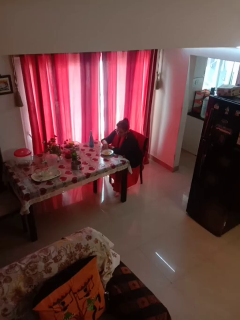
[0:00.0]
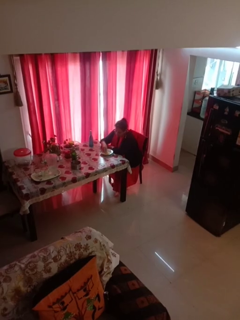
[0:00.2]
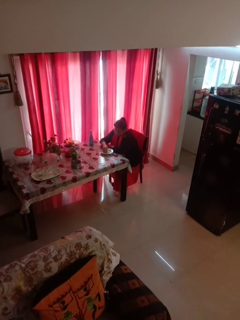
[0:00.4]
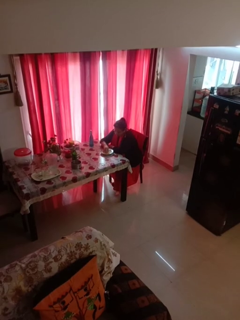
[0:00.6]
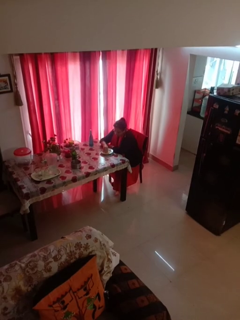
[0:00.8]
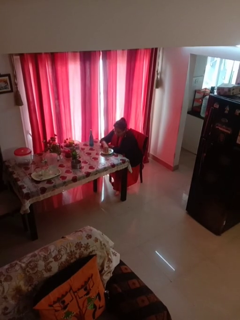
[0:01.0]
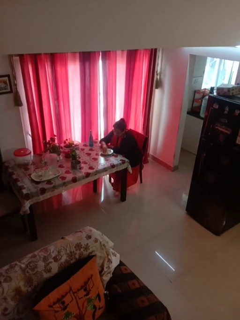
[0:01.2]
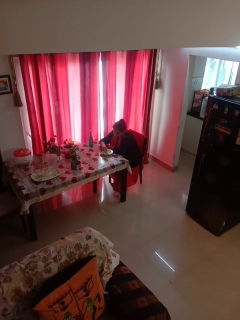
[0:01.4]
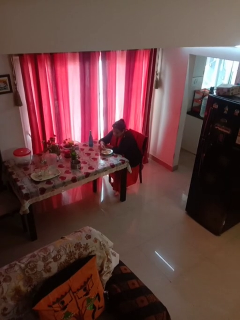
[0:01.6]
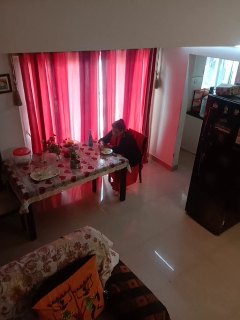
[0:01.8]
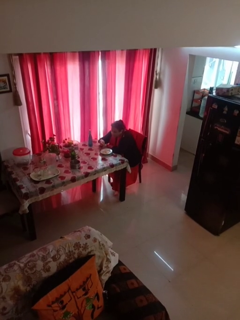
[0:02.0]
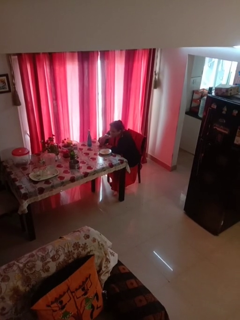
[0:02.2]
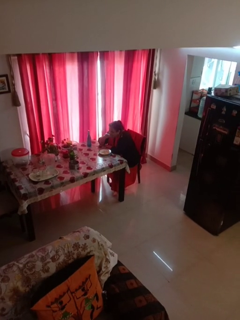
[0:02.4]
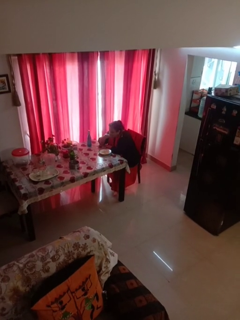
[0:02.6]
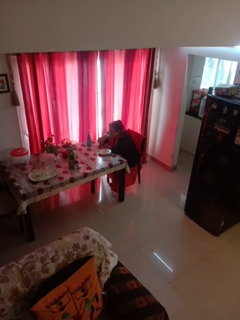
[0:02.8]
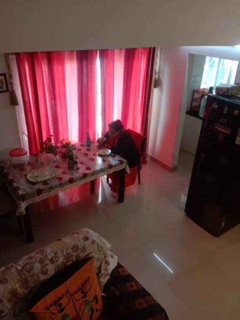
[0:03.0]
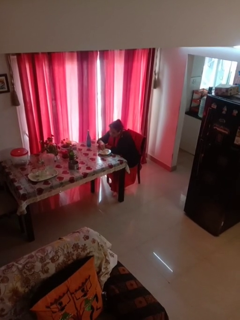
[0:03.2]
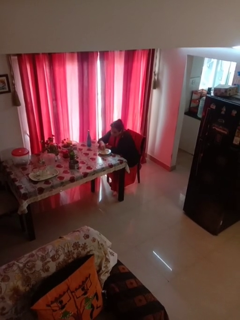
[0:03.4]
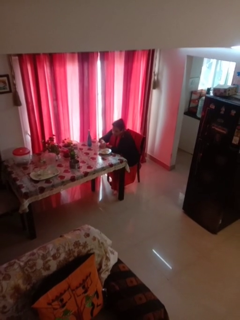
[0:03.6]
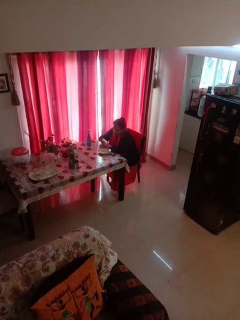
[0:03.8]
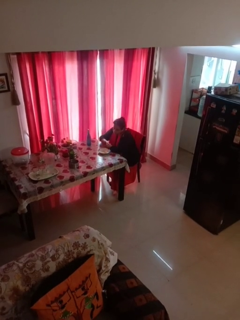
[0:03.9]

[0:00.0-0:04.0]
person eats with hands

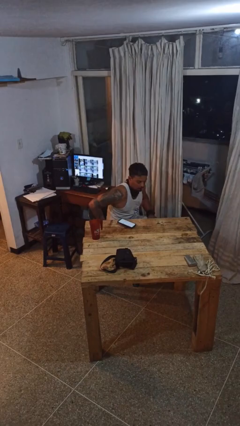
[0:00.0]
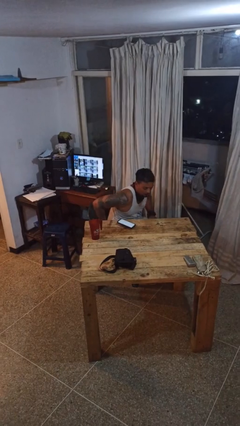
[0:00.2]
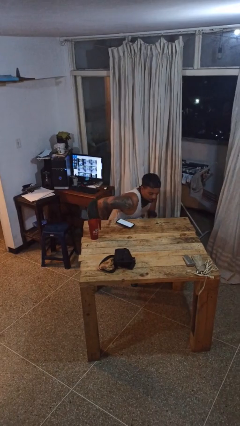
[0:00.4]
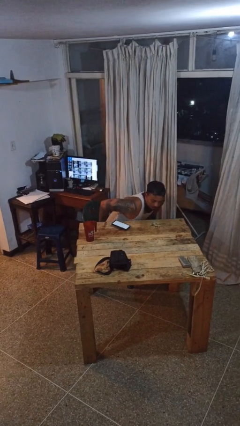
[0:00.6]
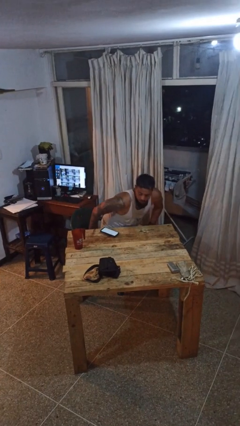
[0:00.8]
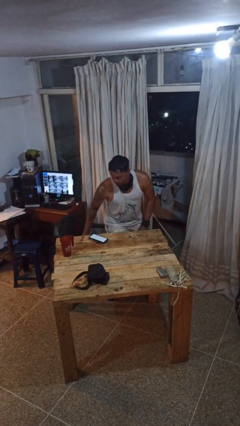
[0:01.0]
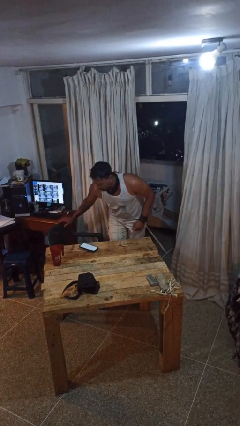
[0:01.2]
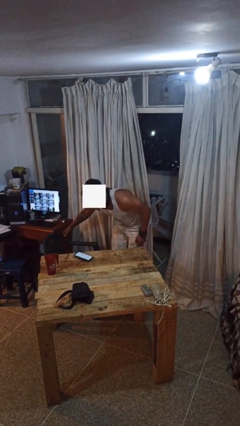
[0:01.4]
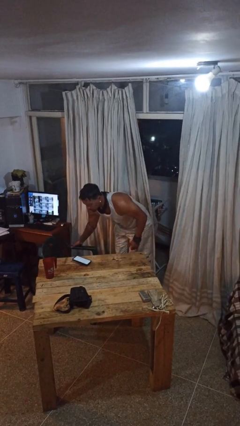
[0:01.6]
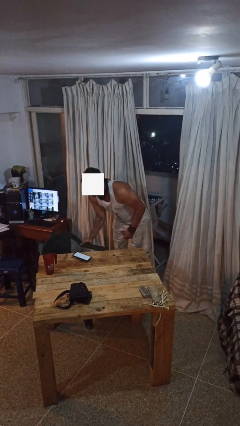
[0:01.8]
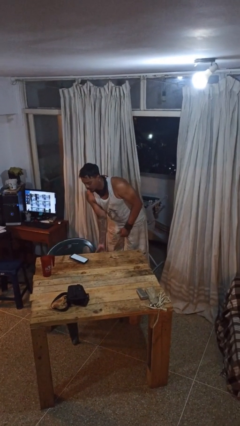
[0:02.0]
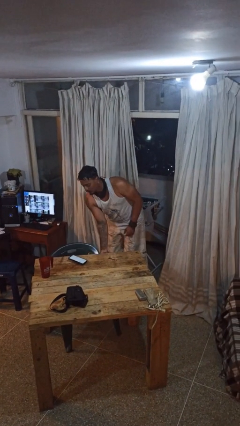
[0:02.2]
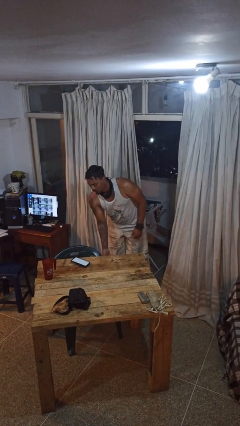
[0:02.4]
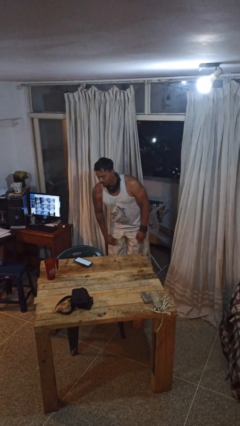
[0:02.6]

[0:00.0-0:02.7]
person stands up

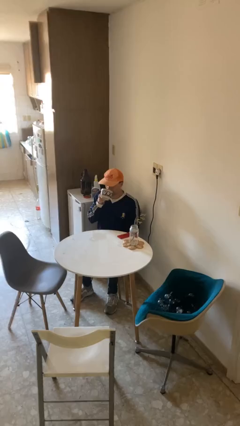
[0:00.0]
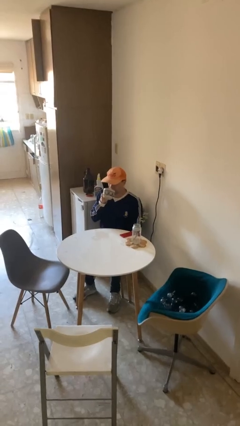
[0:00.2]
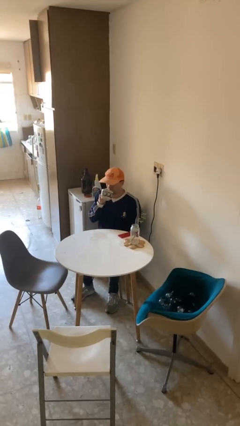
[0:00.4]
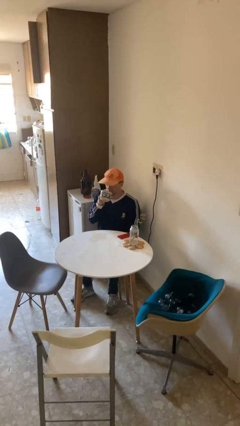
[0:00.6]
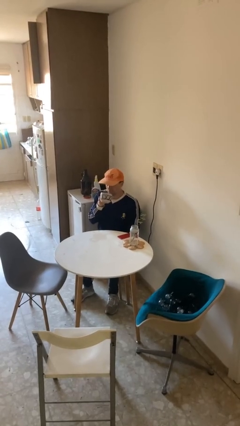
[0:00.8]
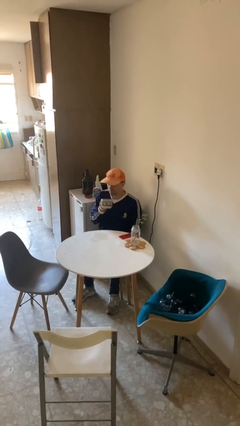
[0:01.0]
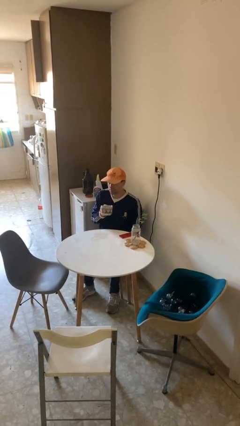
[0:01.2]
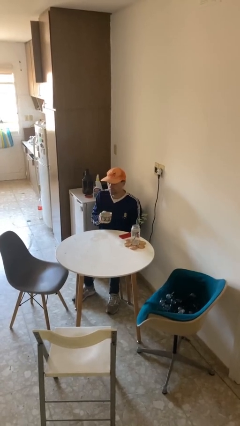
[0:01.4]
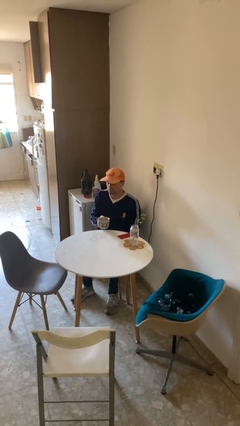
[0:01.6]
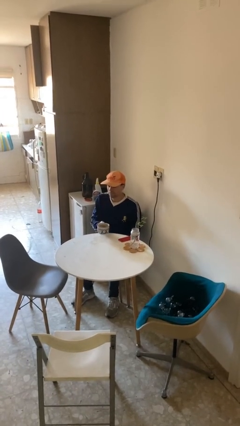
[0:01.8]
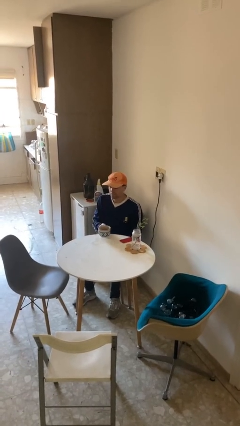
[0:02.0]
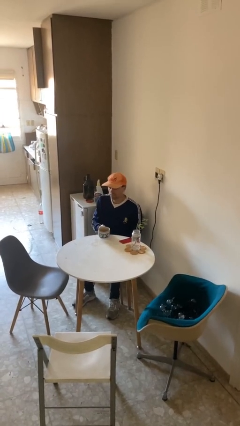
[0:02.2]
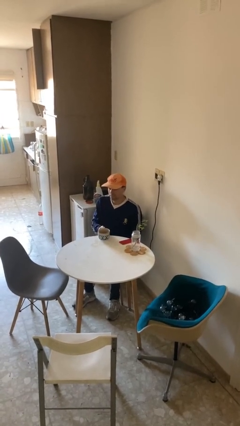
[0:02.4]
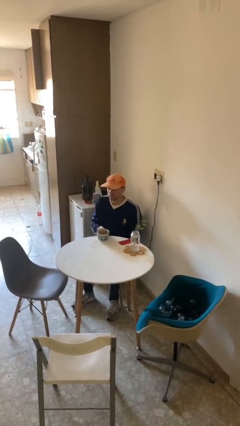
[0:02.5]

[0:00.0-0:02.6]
person puts down object on table

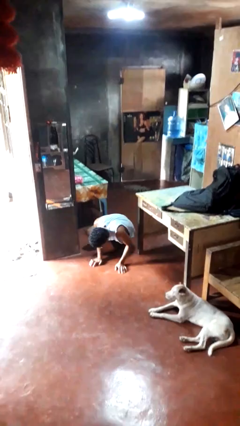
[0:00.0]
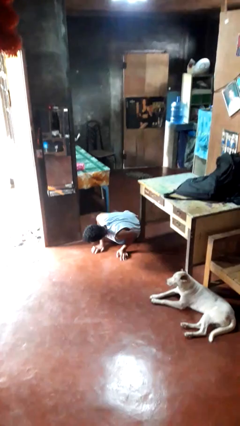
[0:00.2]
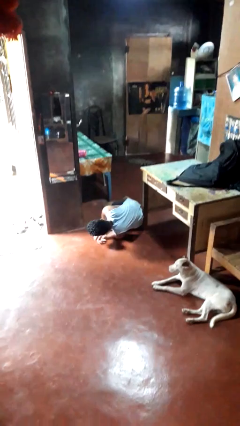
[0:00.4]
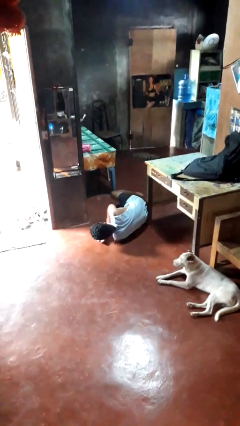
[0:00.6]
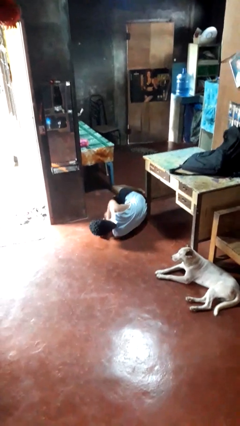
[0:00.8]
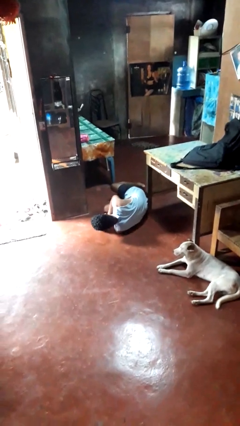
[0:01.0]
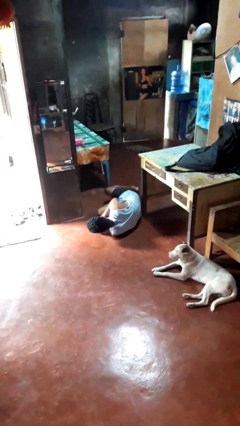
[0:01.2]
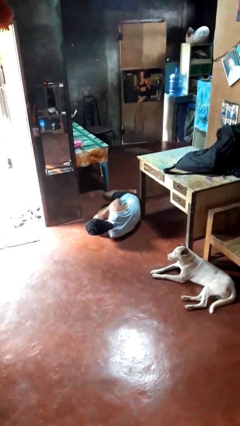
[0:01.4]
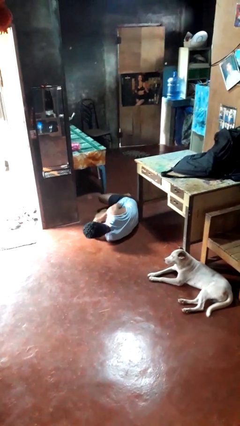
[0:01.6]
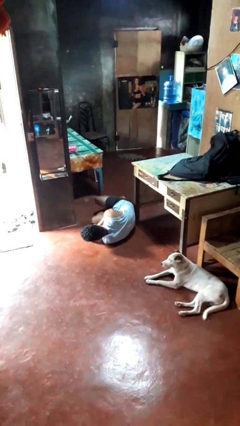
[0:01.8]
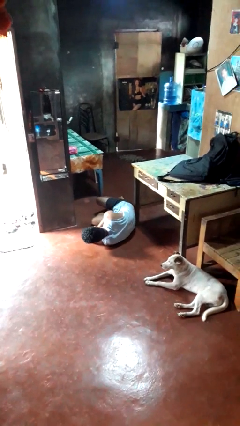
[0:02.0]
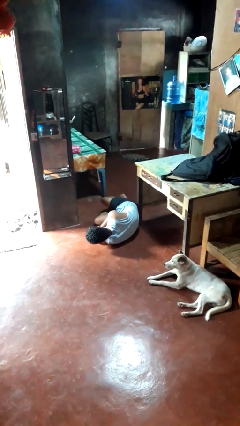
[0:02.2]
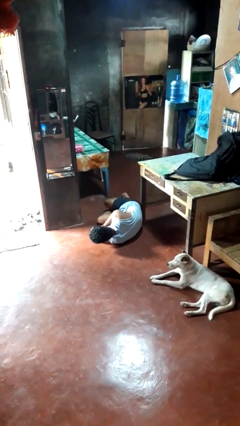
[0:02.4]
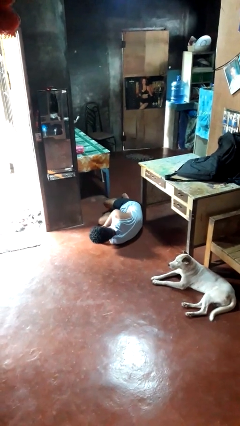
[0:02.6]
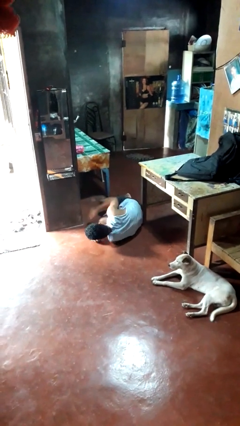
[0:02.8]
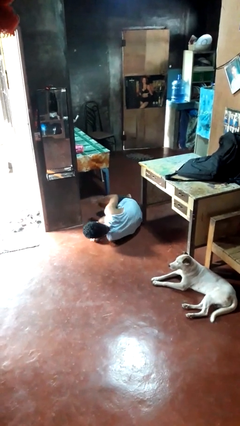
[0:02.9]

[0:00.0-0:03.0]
person lies down on floor

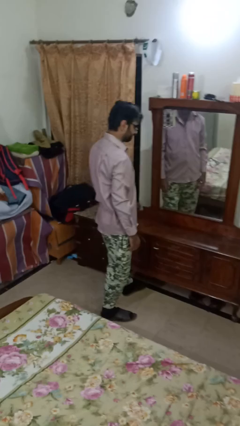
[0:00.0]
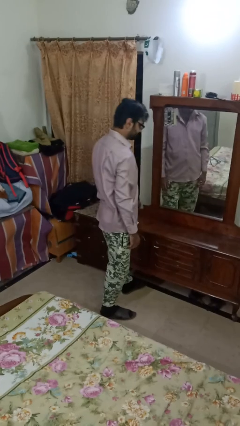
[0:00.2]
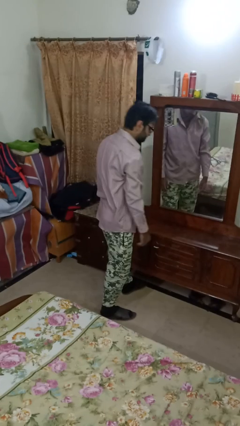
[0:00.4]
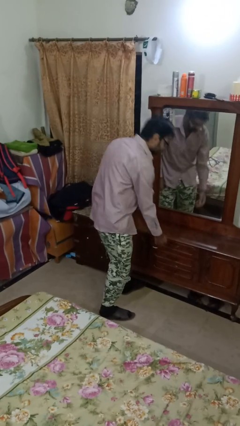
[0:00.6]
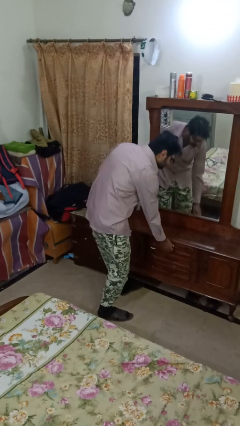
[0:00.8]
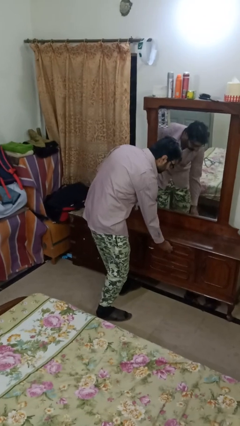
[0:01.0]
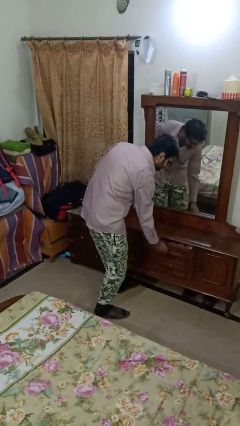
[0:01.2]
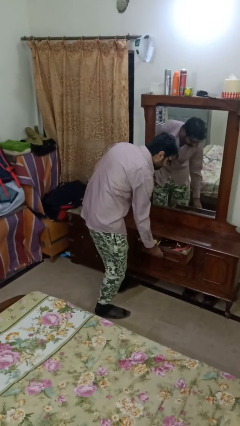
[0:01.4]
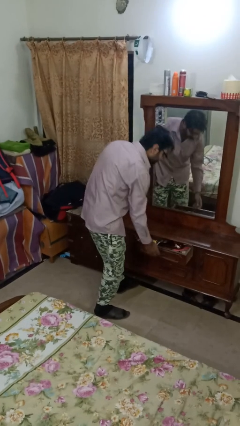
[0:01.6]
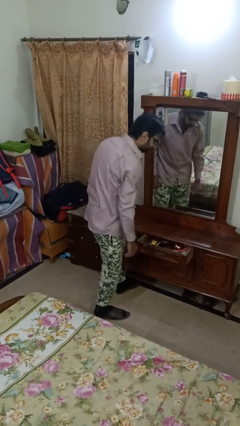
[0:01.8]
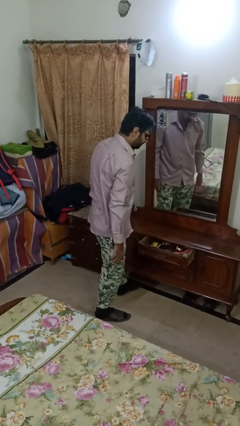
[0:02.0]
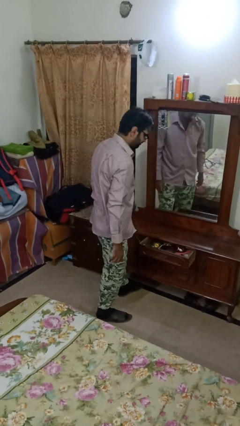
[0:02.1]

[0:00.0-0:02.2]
person opens dresser drawer

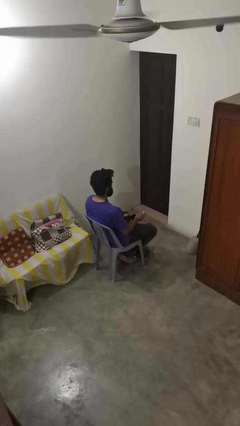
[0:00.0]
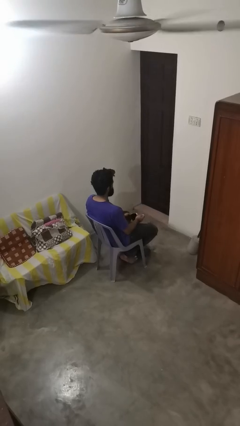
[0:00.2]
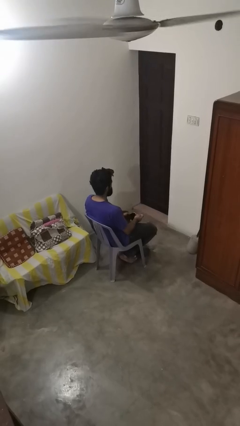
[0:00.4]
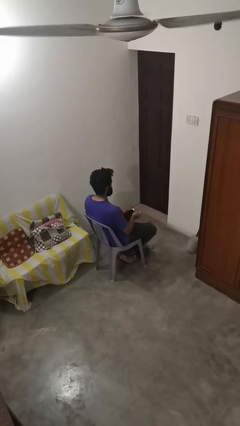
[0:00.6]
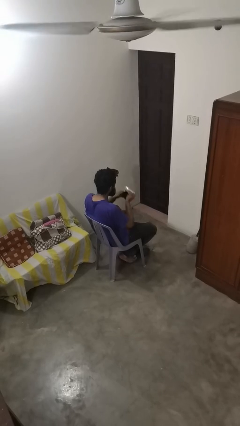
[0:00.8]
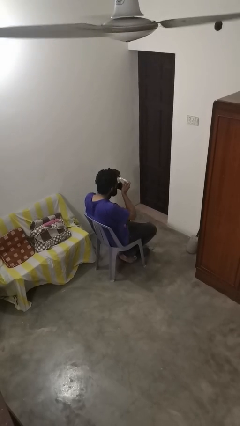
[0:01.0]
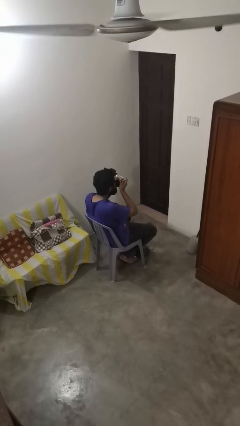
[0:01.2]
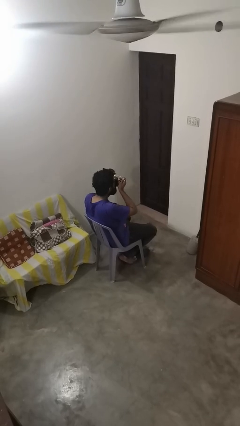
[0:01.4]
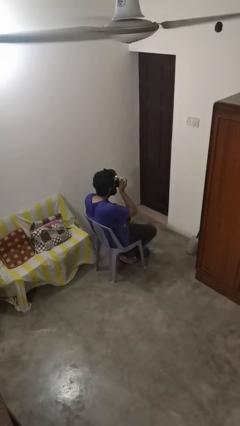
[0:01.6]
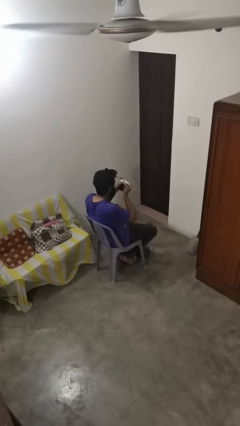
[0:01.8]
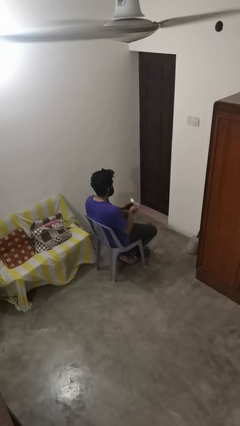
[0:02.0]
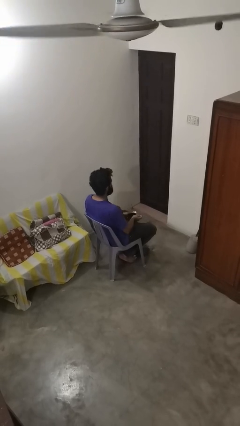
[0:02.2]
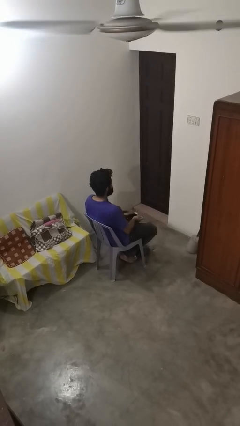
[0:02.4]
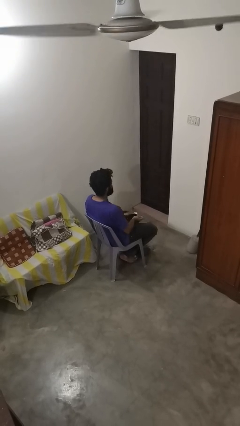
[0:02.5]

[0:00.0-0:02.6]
person drinks from mug

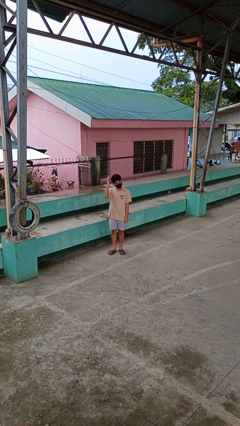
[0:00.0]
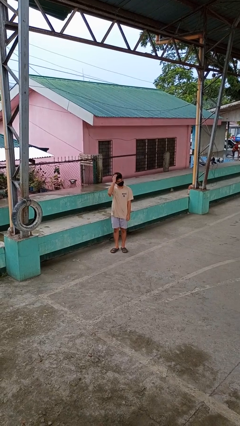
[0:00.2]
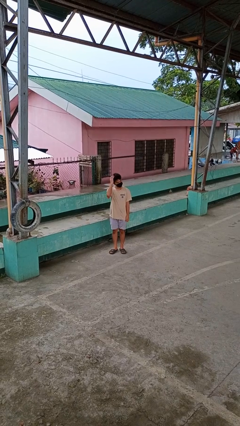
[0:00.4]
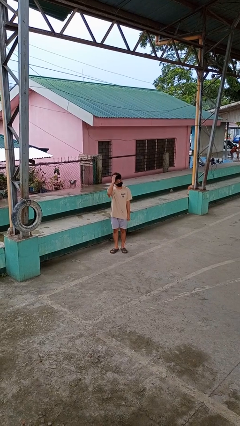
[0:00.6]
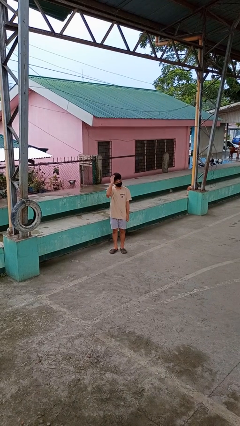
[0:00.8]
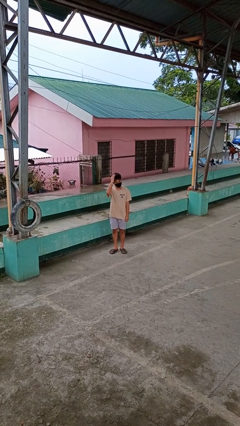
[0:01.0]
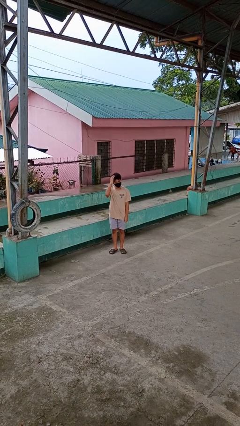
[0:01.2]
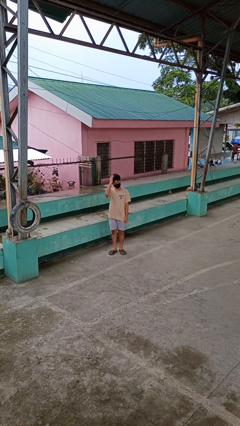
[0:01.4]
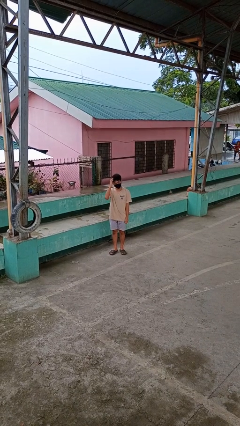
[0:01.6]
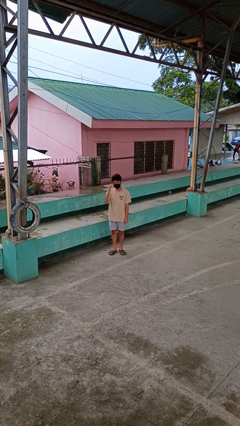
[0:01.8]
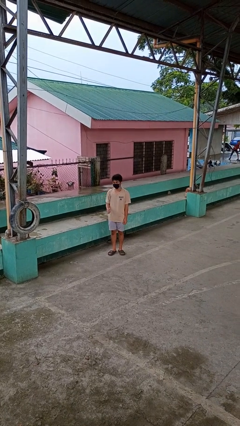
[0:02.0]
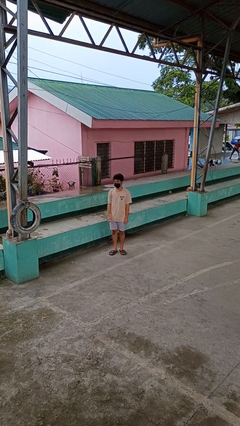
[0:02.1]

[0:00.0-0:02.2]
person pats head
